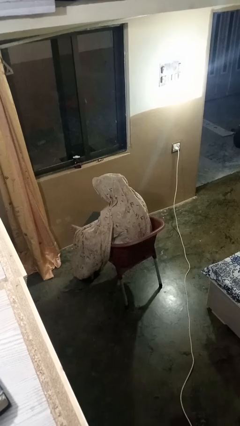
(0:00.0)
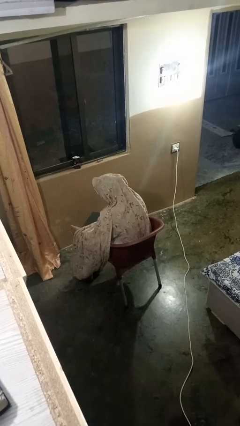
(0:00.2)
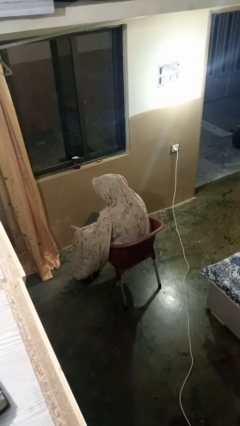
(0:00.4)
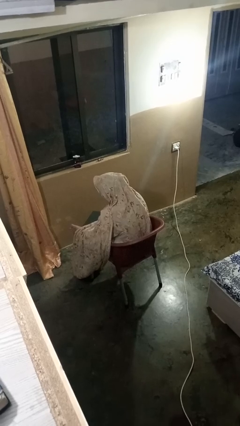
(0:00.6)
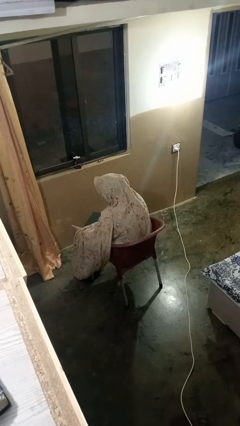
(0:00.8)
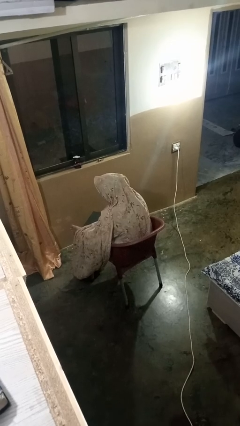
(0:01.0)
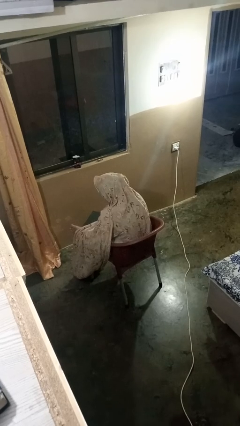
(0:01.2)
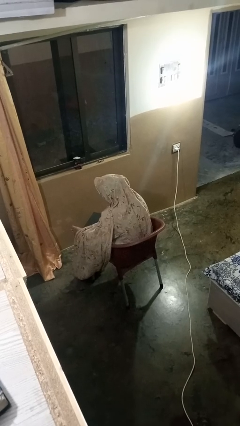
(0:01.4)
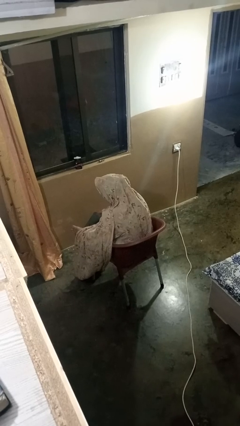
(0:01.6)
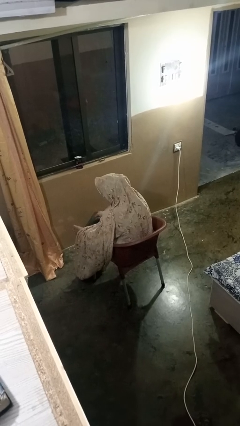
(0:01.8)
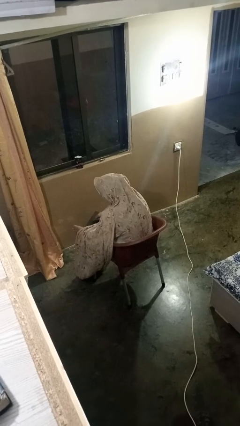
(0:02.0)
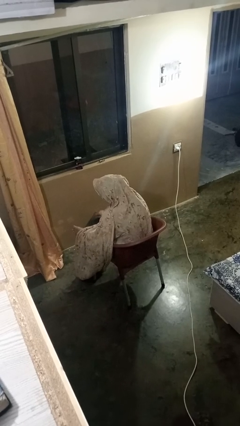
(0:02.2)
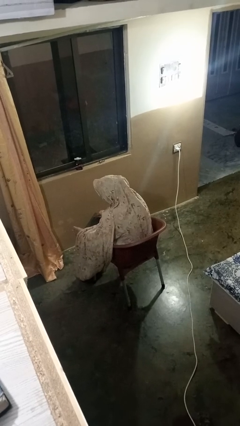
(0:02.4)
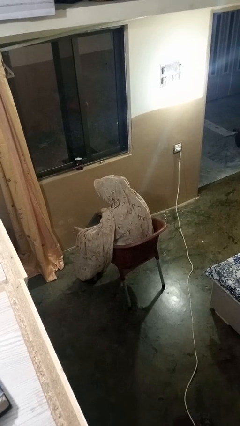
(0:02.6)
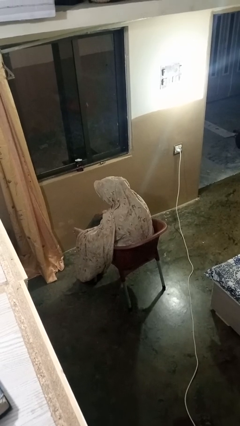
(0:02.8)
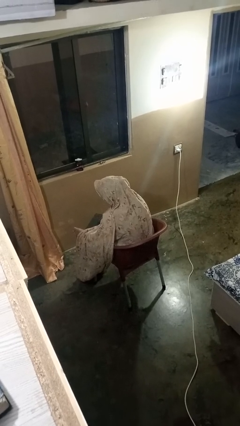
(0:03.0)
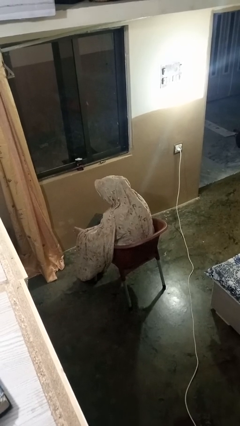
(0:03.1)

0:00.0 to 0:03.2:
person interacts with tablet

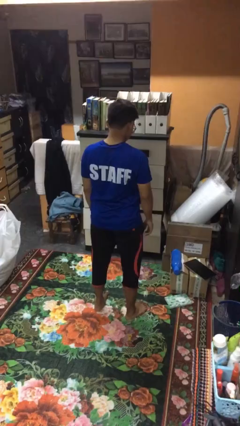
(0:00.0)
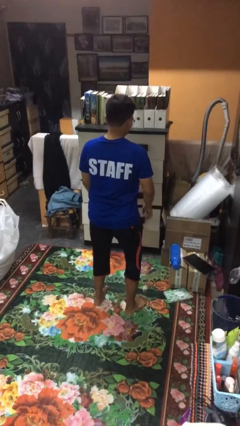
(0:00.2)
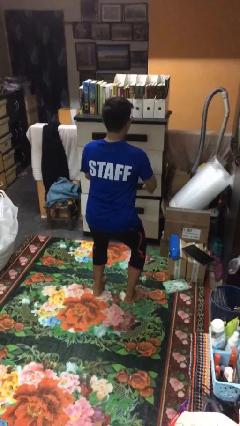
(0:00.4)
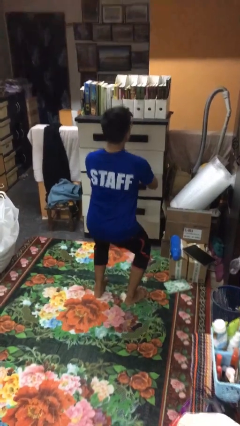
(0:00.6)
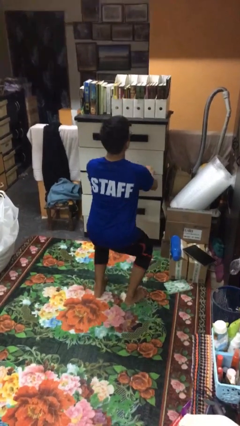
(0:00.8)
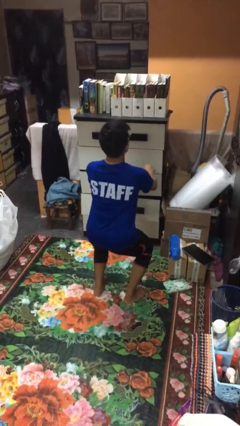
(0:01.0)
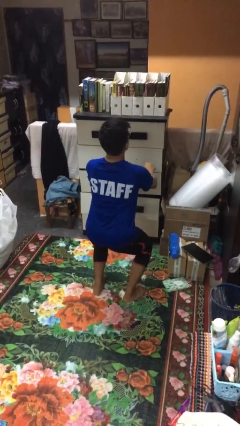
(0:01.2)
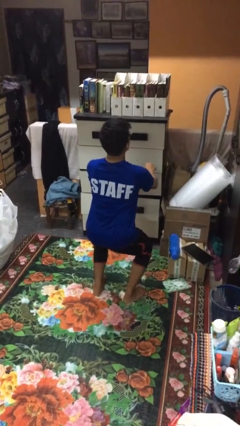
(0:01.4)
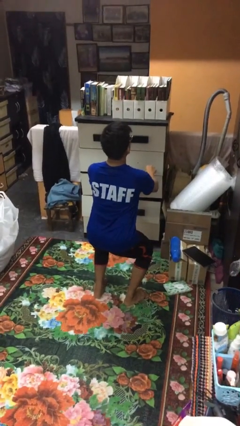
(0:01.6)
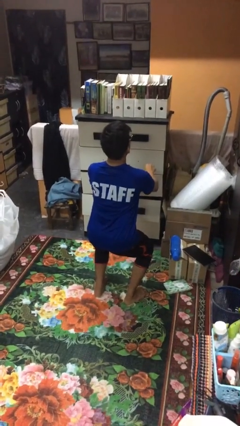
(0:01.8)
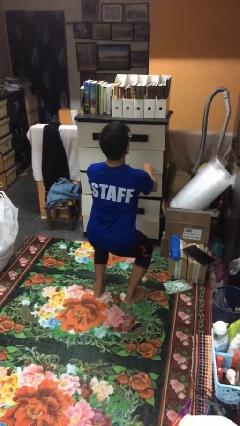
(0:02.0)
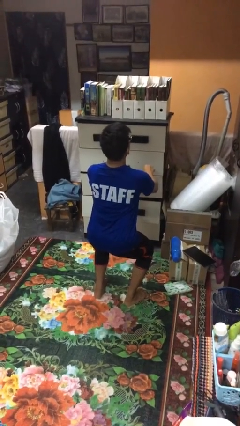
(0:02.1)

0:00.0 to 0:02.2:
person squats

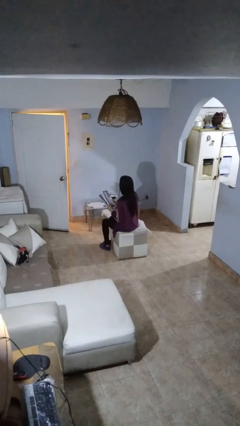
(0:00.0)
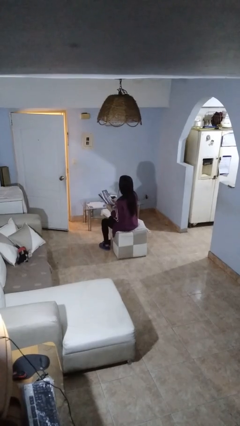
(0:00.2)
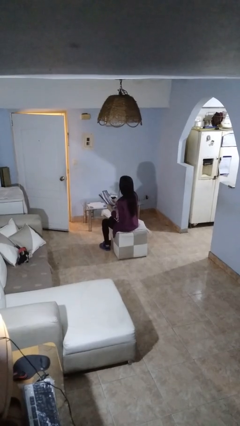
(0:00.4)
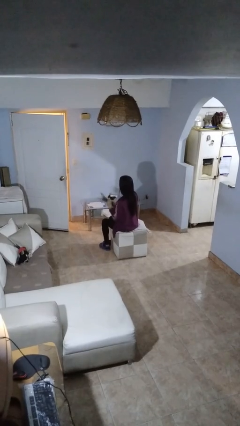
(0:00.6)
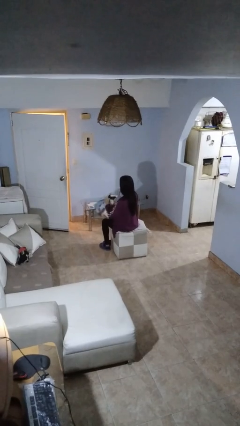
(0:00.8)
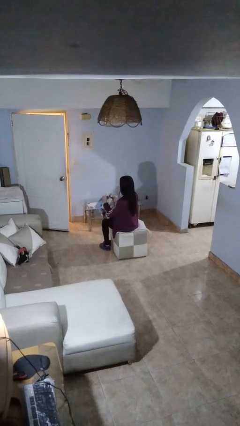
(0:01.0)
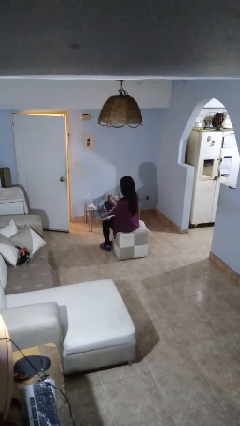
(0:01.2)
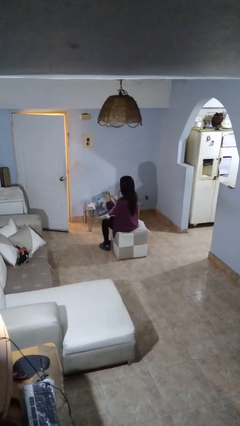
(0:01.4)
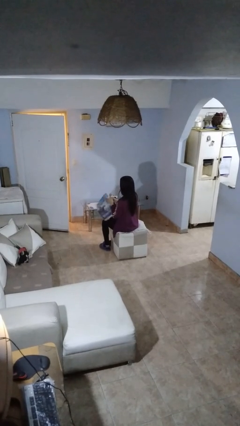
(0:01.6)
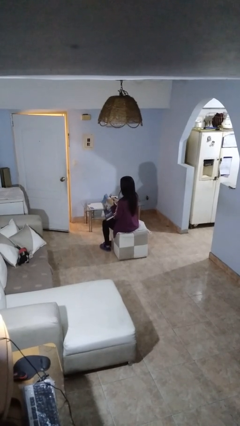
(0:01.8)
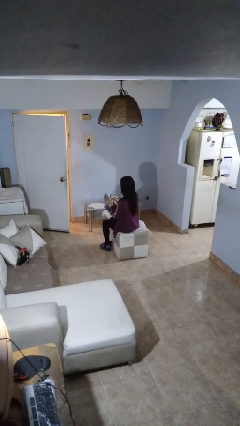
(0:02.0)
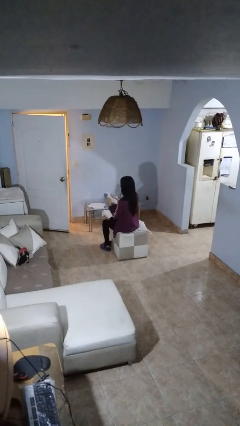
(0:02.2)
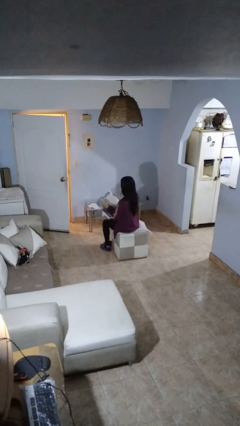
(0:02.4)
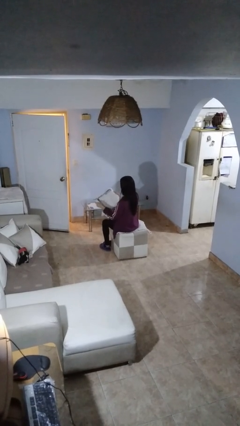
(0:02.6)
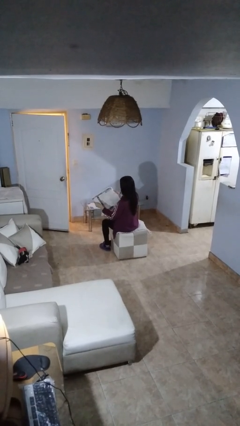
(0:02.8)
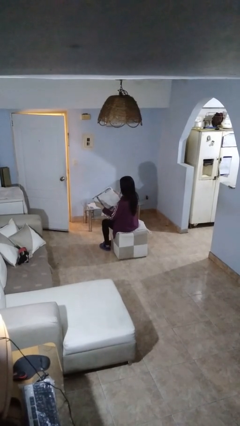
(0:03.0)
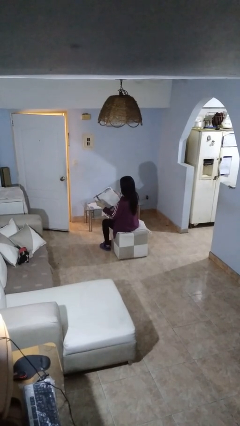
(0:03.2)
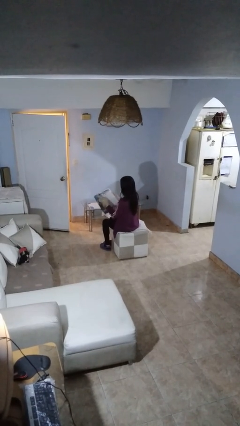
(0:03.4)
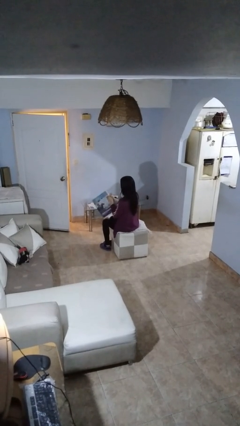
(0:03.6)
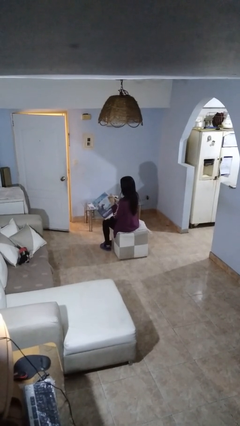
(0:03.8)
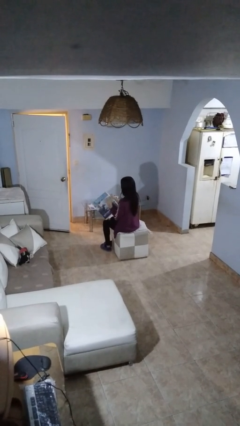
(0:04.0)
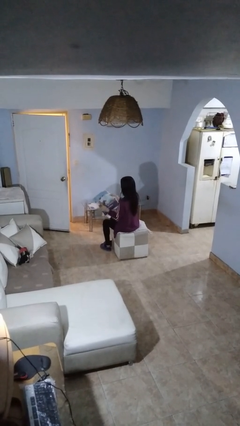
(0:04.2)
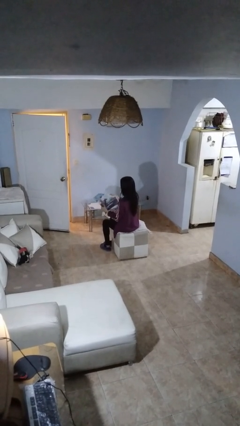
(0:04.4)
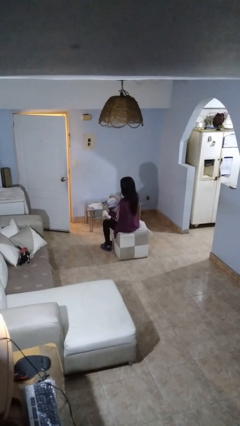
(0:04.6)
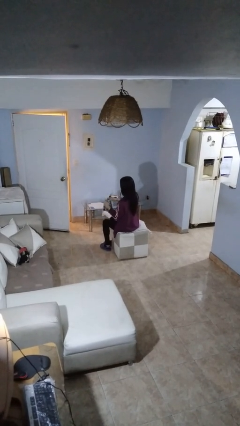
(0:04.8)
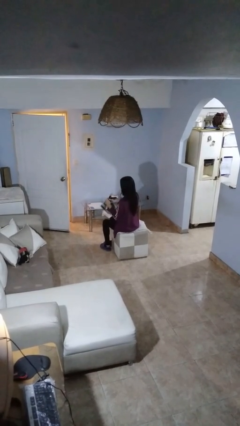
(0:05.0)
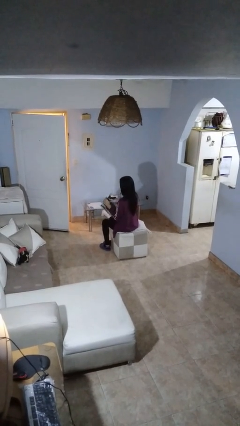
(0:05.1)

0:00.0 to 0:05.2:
person reads newspaper

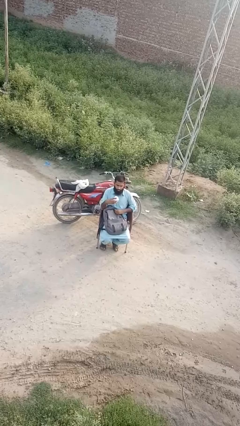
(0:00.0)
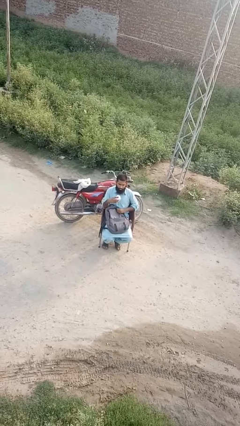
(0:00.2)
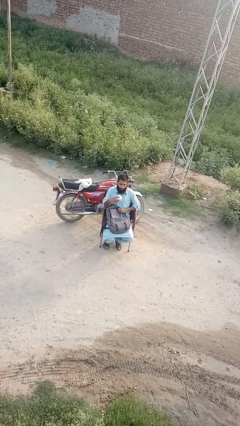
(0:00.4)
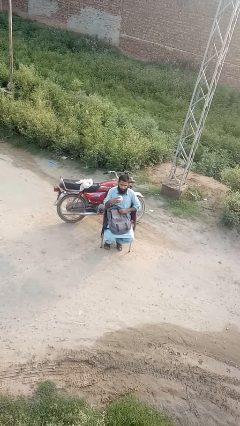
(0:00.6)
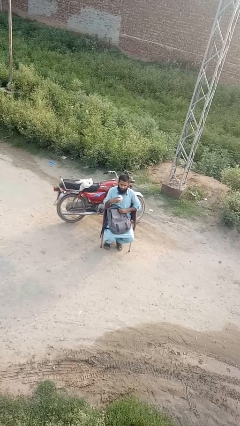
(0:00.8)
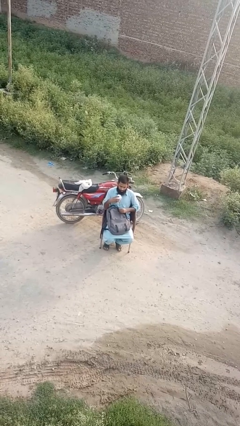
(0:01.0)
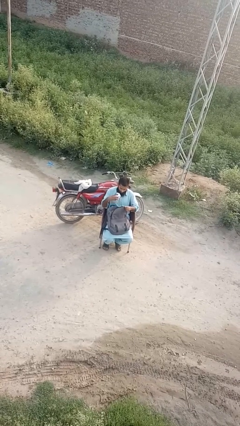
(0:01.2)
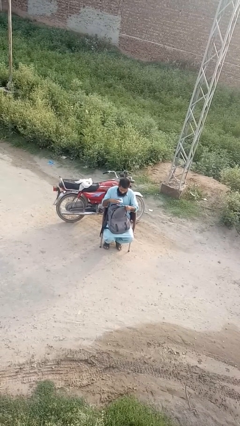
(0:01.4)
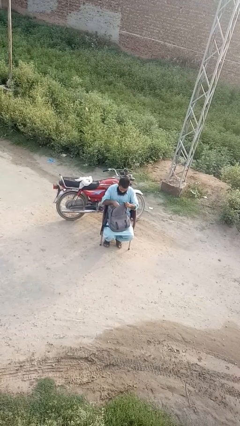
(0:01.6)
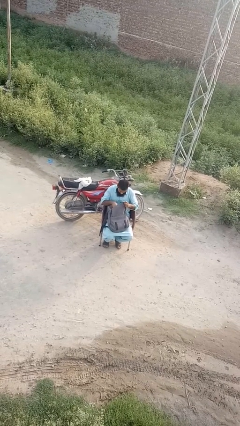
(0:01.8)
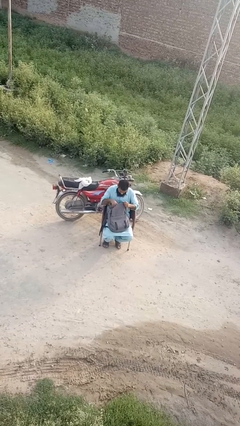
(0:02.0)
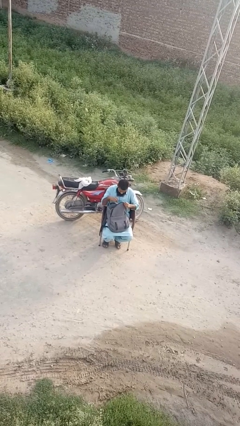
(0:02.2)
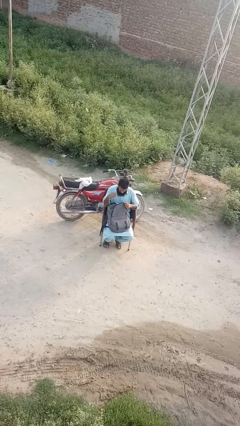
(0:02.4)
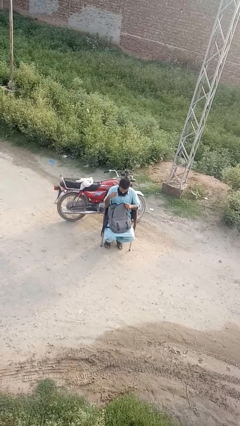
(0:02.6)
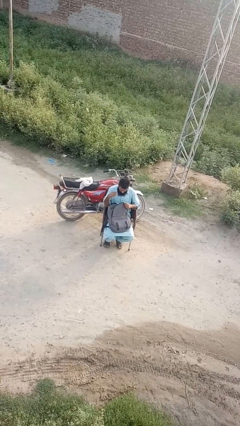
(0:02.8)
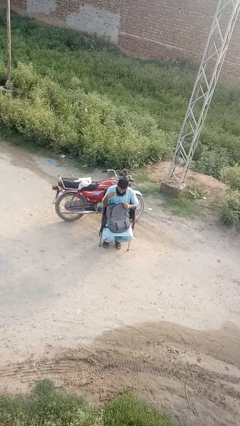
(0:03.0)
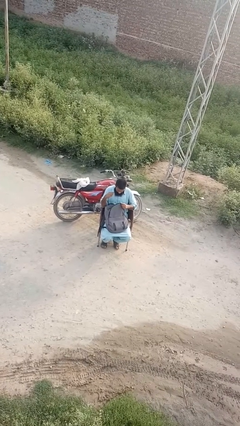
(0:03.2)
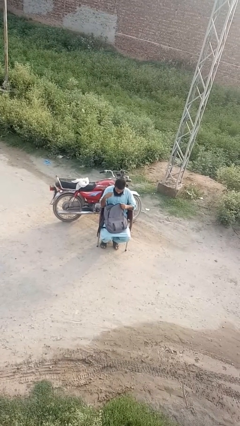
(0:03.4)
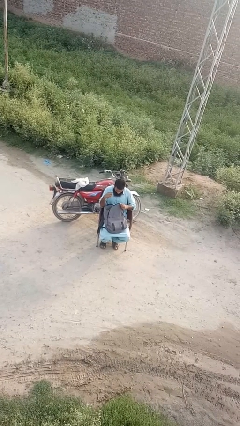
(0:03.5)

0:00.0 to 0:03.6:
person puts object into backpack

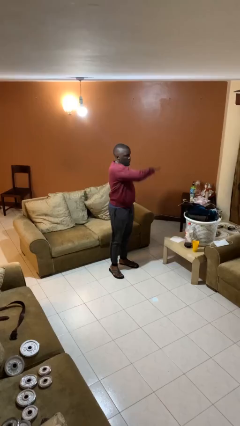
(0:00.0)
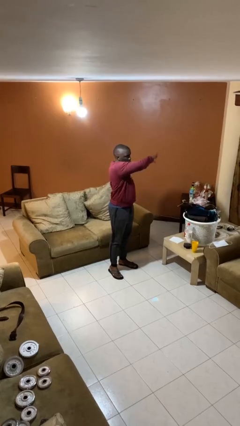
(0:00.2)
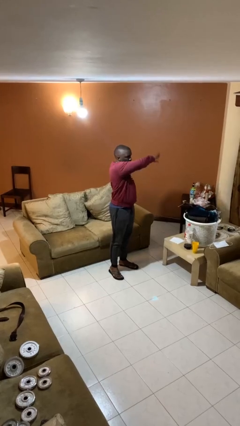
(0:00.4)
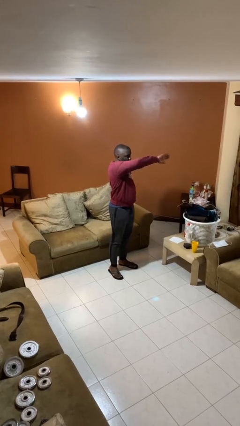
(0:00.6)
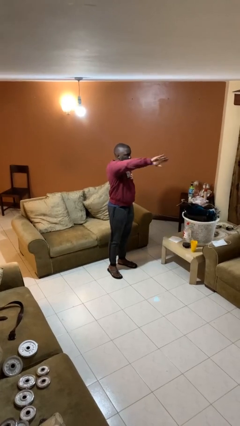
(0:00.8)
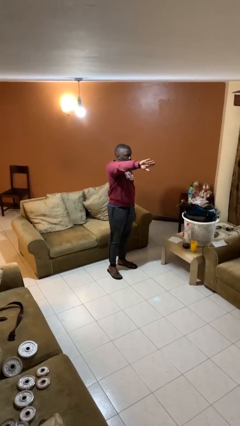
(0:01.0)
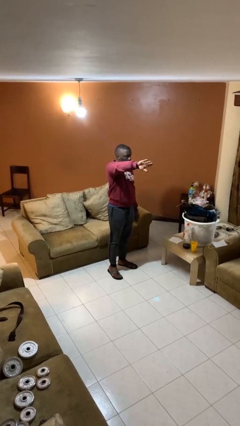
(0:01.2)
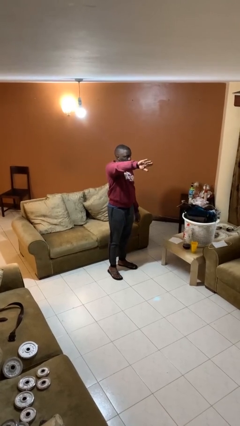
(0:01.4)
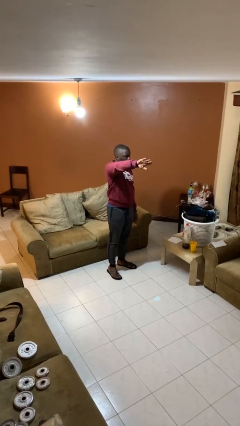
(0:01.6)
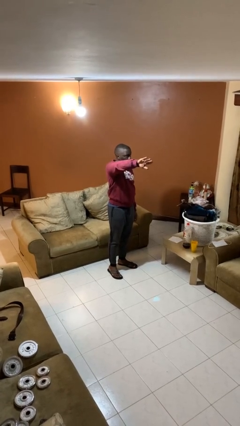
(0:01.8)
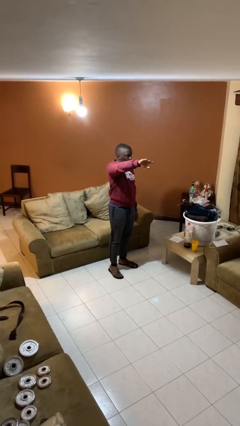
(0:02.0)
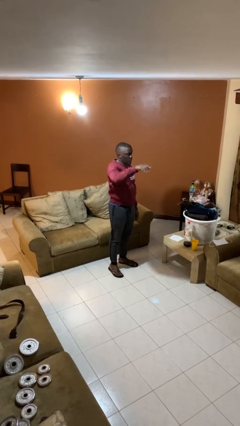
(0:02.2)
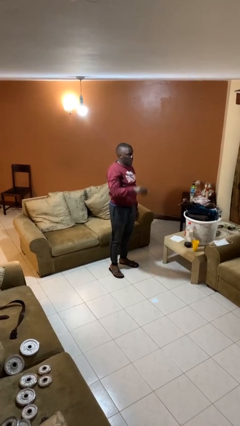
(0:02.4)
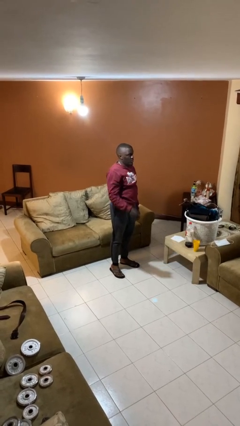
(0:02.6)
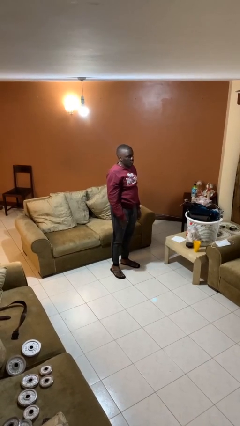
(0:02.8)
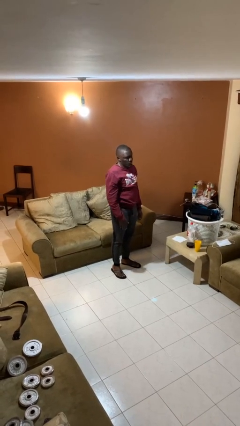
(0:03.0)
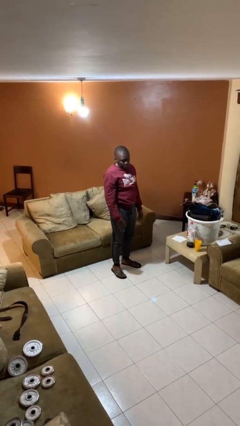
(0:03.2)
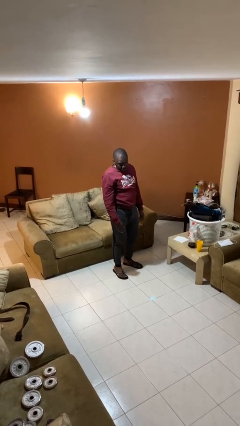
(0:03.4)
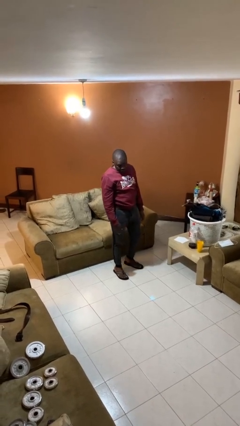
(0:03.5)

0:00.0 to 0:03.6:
person gestures swipe right
